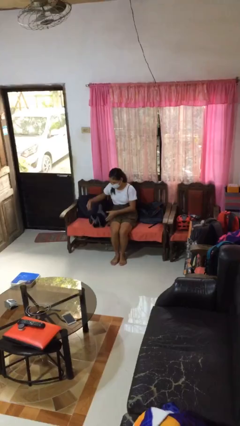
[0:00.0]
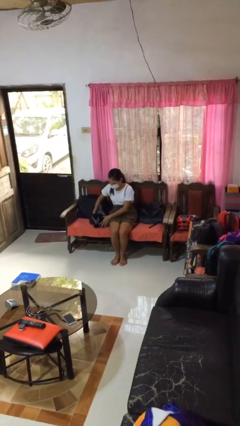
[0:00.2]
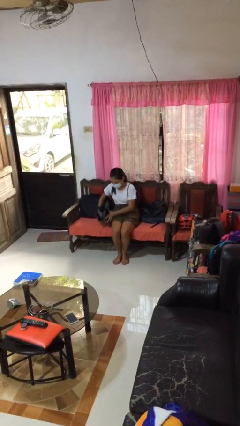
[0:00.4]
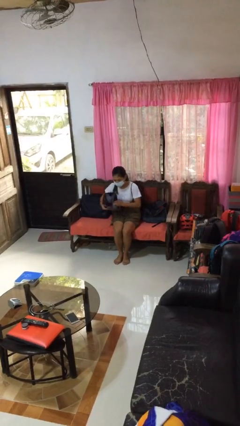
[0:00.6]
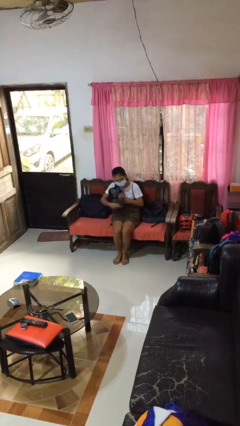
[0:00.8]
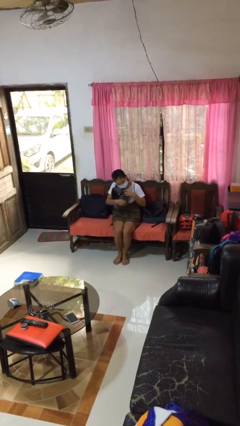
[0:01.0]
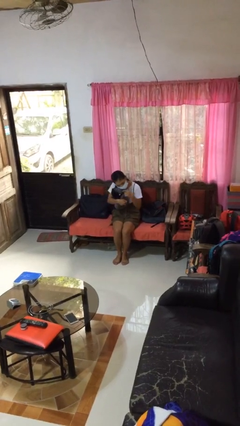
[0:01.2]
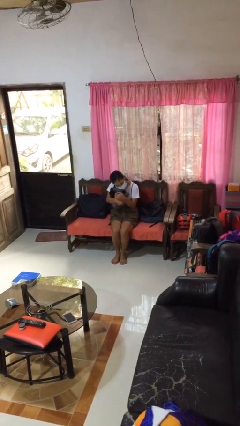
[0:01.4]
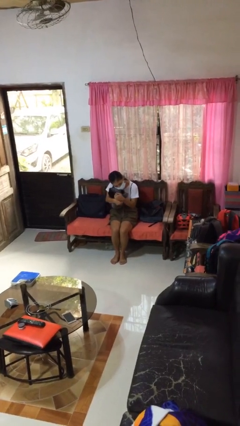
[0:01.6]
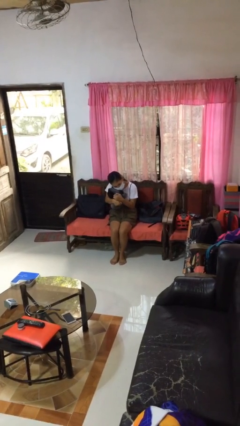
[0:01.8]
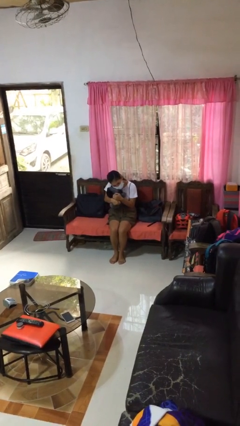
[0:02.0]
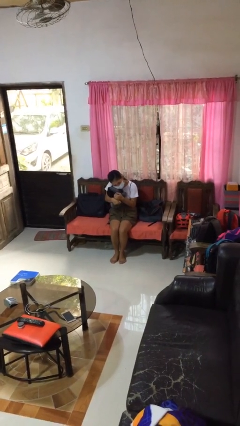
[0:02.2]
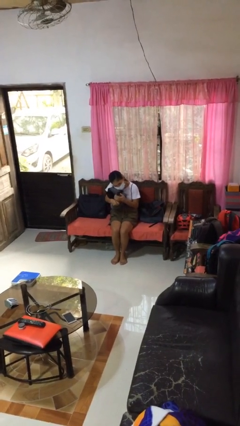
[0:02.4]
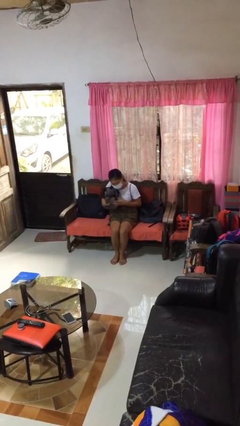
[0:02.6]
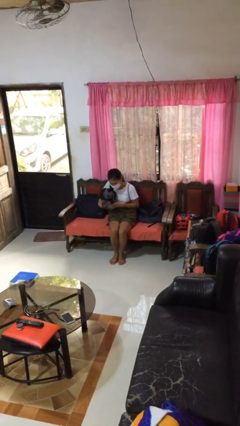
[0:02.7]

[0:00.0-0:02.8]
person hugs stuffed animal

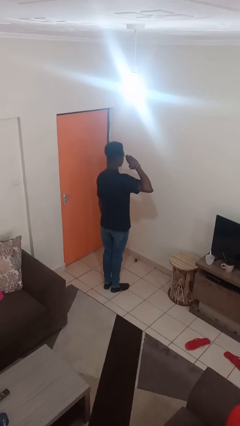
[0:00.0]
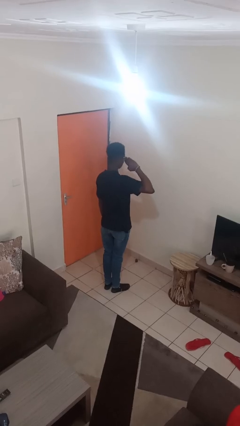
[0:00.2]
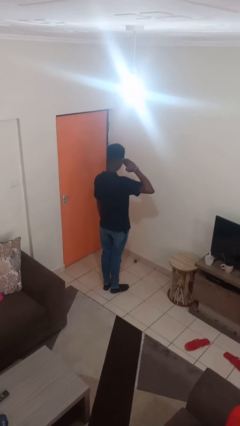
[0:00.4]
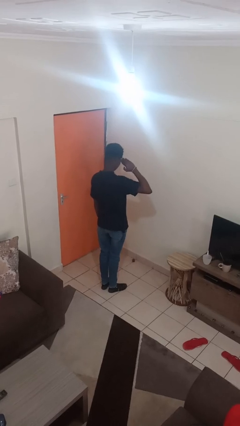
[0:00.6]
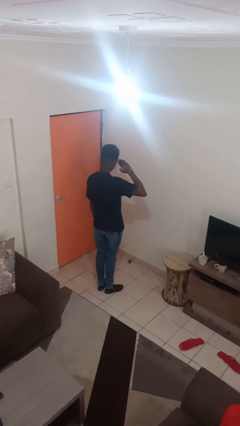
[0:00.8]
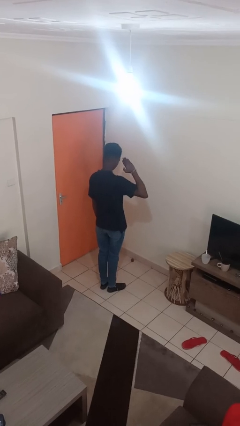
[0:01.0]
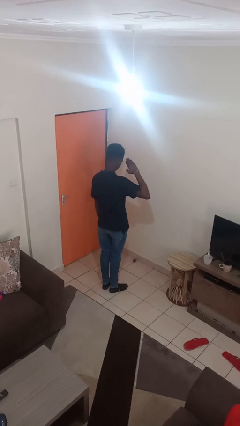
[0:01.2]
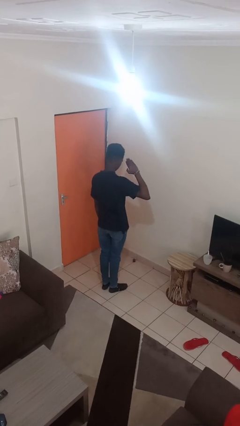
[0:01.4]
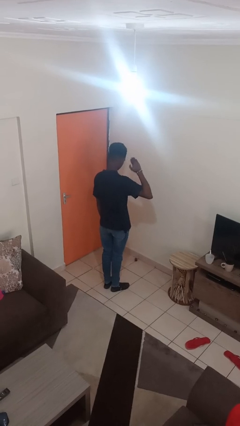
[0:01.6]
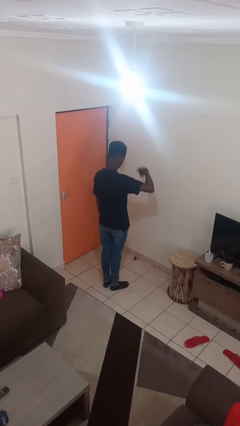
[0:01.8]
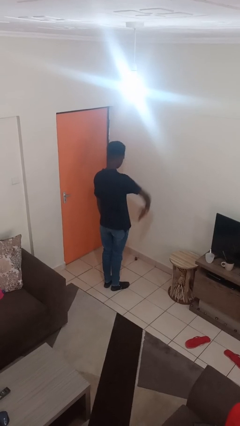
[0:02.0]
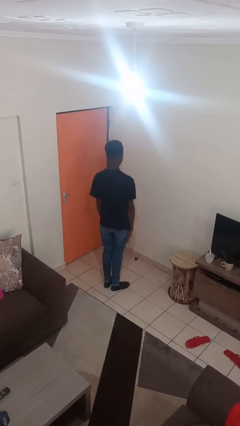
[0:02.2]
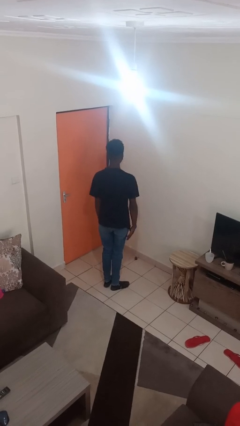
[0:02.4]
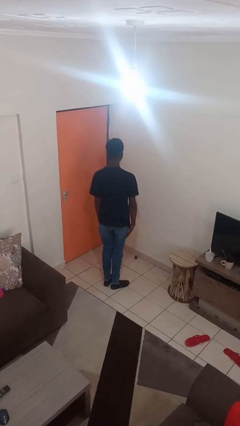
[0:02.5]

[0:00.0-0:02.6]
person salutes

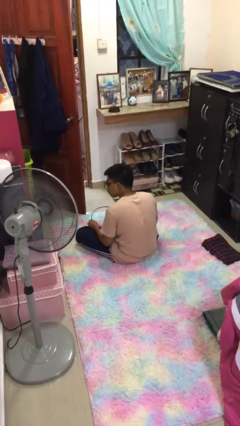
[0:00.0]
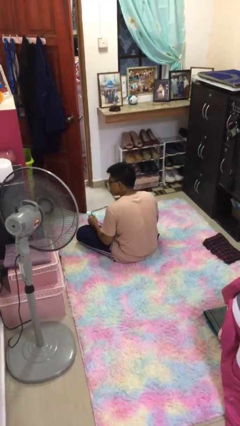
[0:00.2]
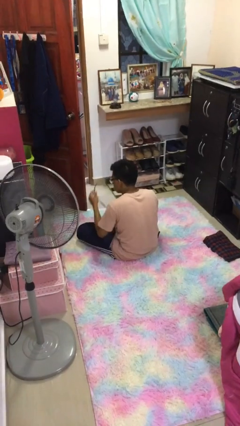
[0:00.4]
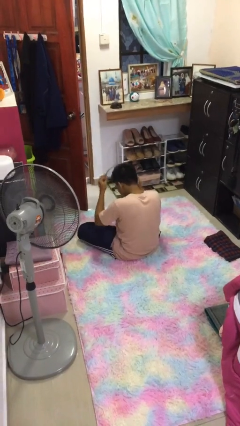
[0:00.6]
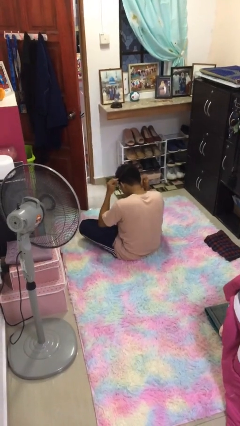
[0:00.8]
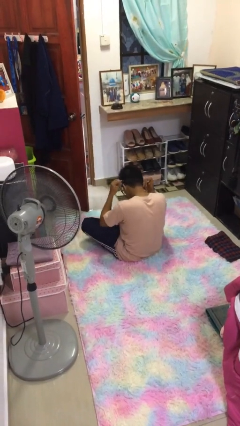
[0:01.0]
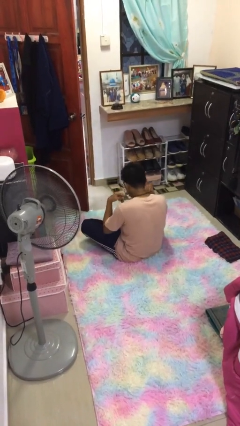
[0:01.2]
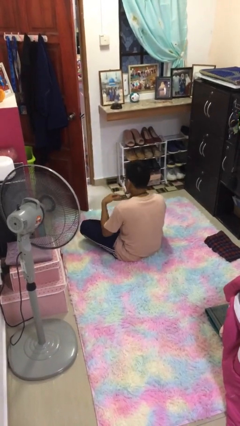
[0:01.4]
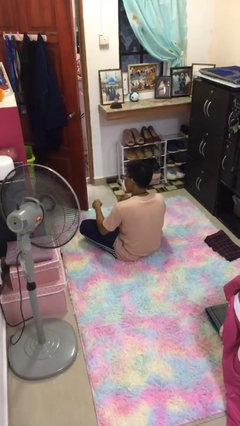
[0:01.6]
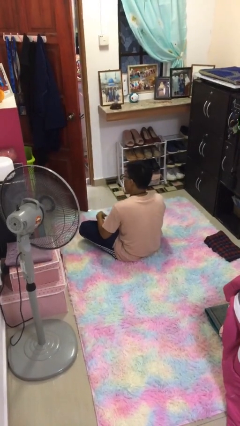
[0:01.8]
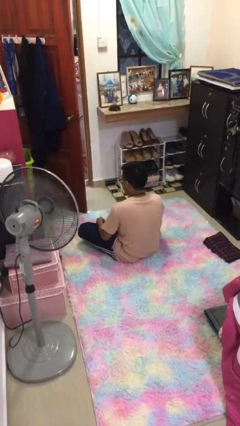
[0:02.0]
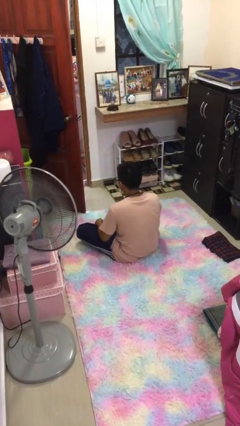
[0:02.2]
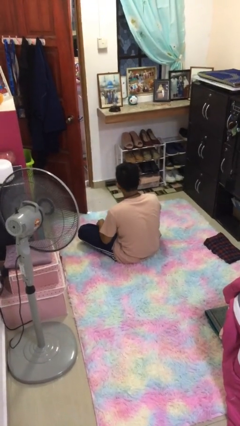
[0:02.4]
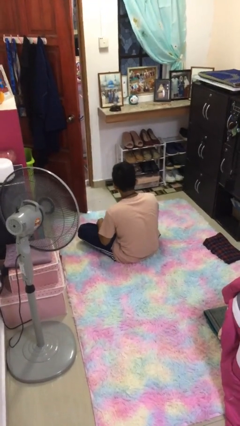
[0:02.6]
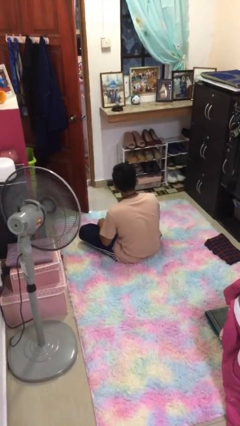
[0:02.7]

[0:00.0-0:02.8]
person puts on necklace

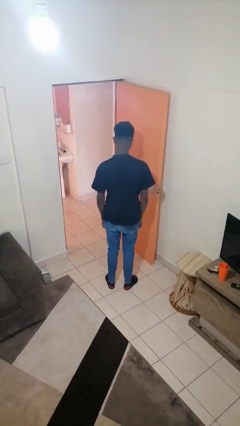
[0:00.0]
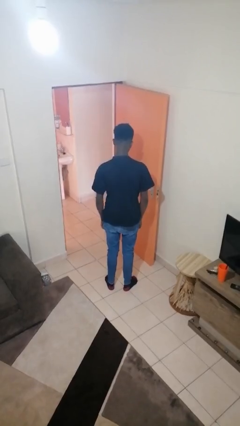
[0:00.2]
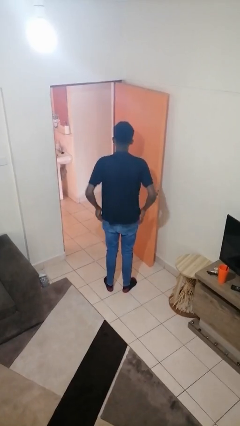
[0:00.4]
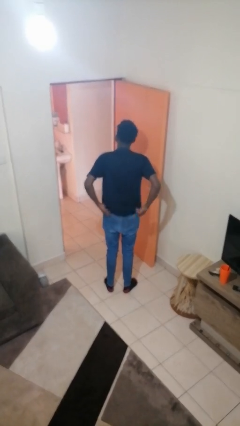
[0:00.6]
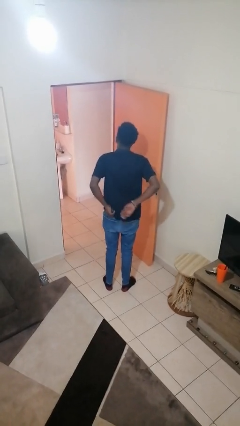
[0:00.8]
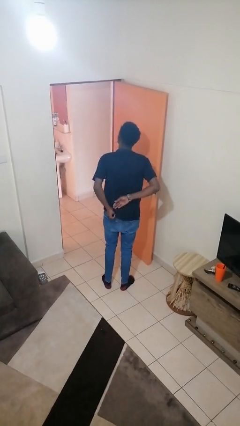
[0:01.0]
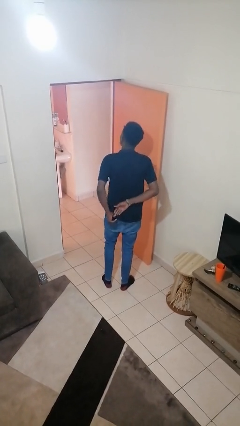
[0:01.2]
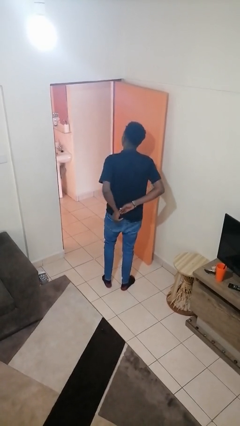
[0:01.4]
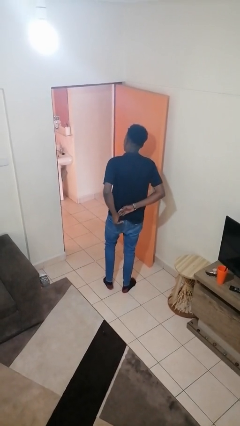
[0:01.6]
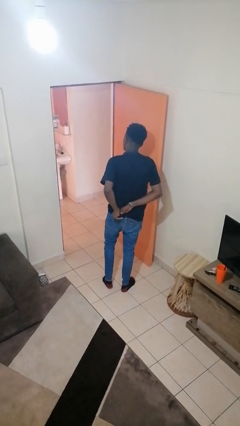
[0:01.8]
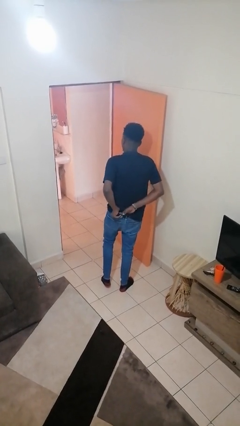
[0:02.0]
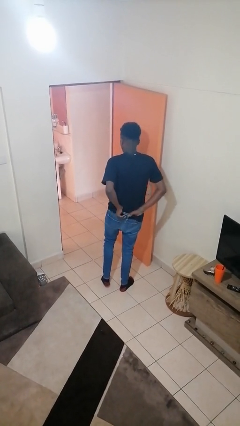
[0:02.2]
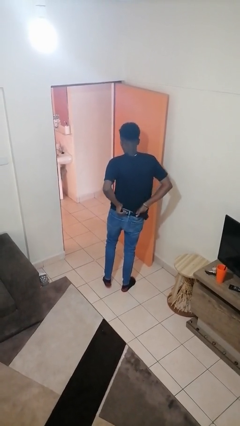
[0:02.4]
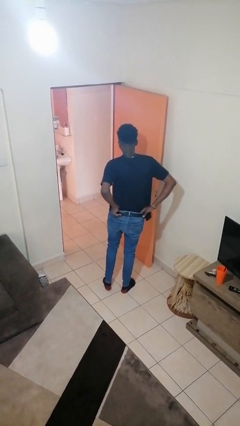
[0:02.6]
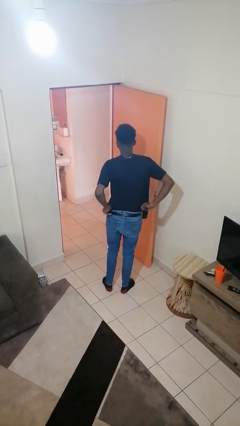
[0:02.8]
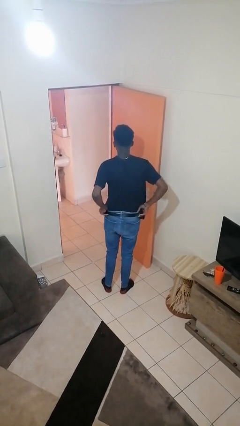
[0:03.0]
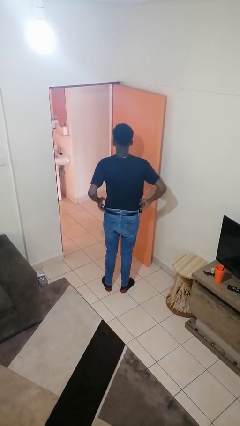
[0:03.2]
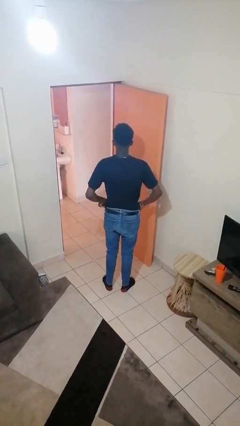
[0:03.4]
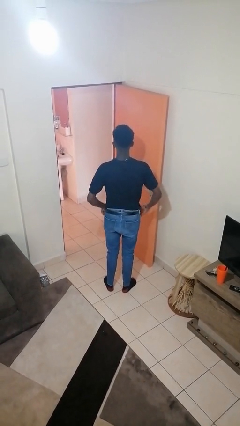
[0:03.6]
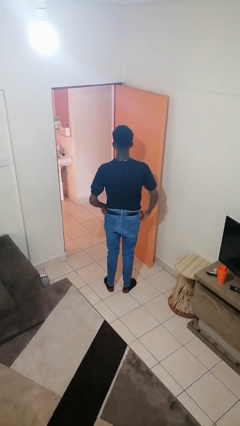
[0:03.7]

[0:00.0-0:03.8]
person tucks in shirt

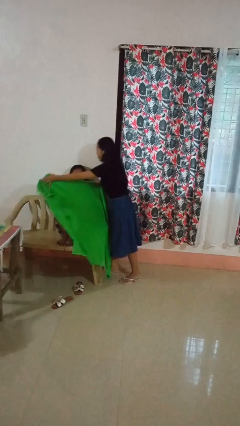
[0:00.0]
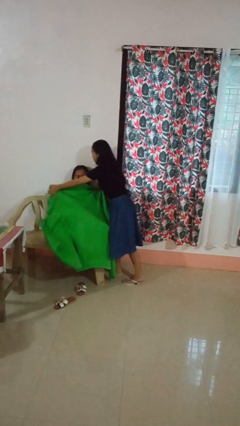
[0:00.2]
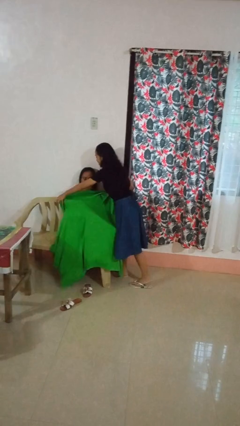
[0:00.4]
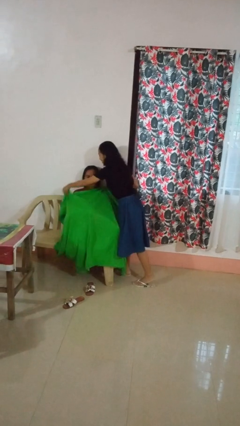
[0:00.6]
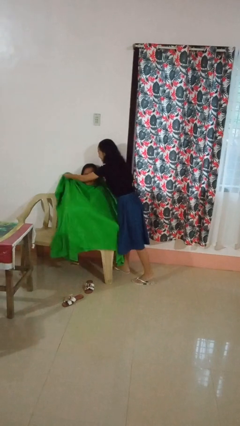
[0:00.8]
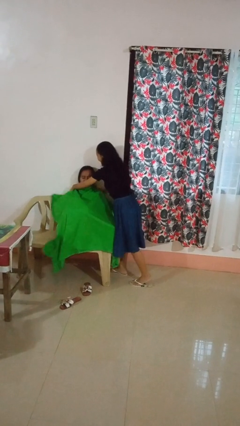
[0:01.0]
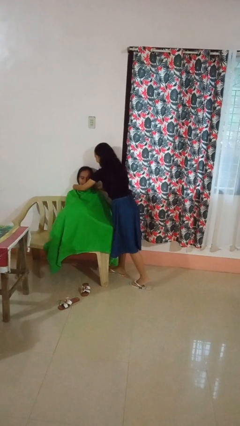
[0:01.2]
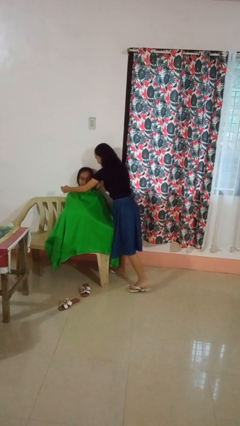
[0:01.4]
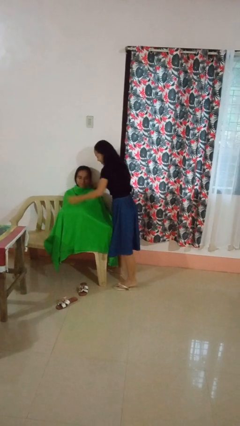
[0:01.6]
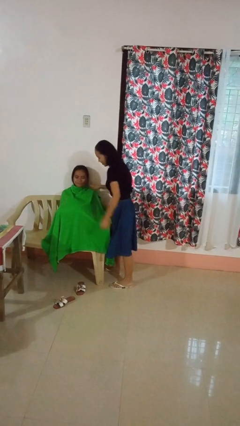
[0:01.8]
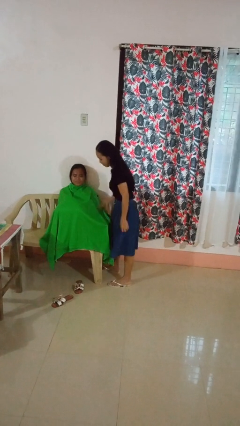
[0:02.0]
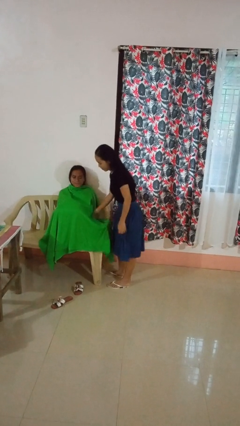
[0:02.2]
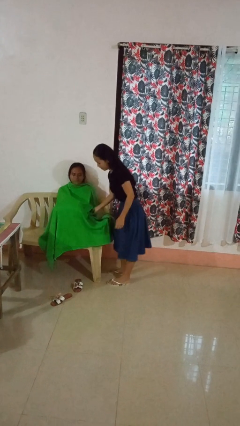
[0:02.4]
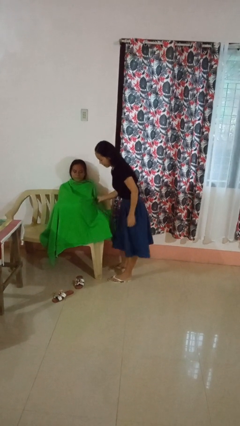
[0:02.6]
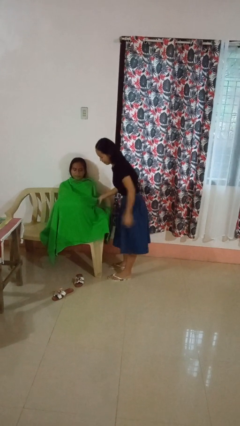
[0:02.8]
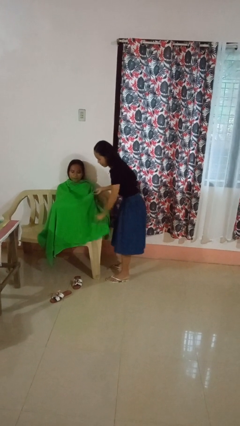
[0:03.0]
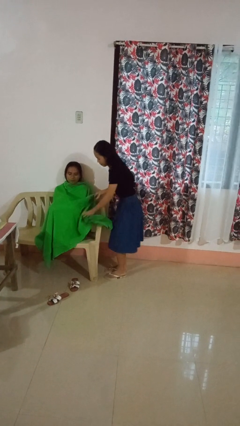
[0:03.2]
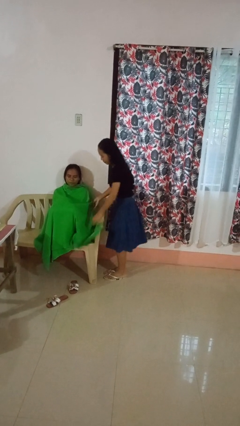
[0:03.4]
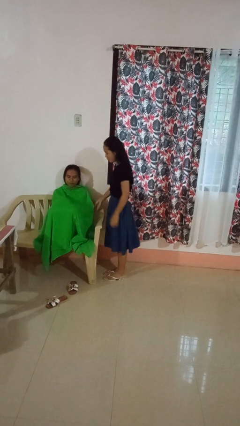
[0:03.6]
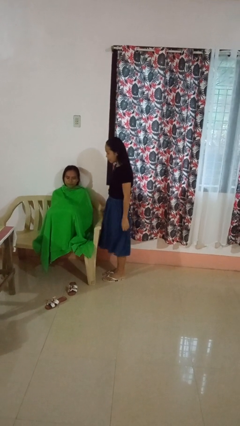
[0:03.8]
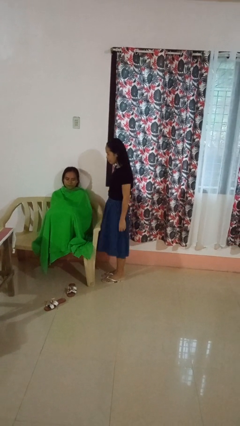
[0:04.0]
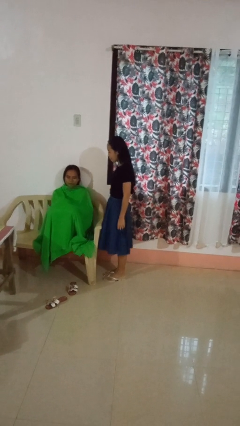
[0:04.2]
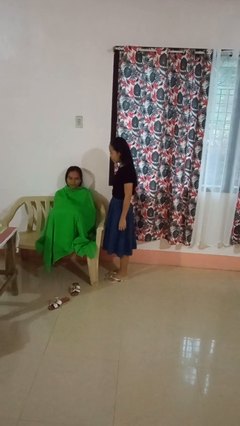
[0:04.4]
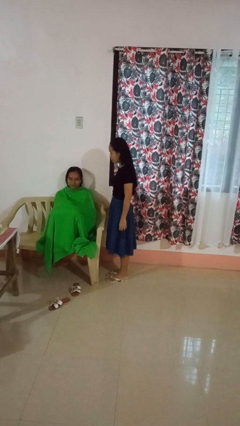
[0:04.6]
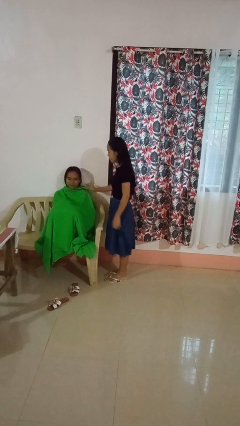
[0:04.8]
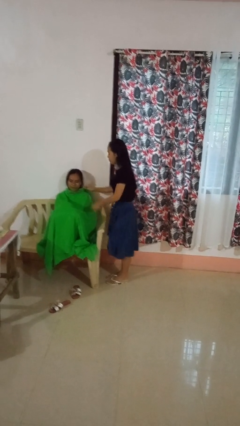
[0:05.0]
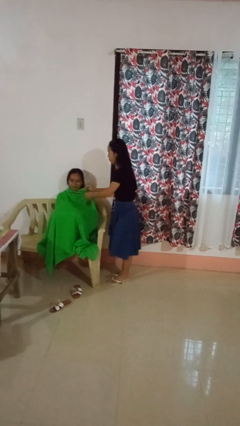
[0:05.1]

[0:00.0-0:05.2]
person covers friend with blanket

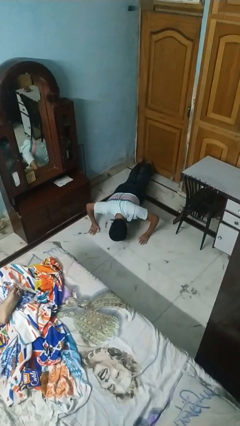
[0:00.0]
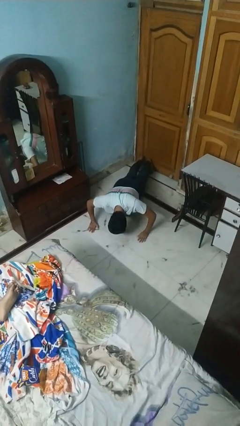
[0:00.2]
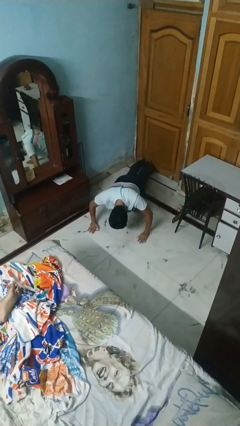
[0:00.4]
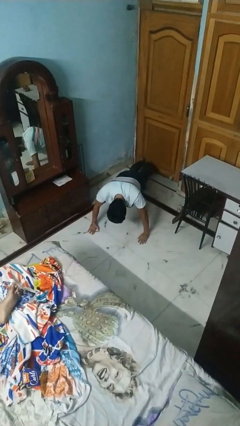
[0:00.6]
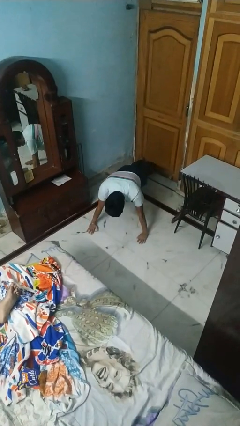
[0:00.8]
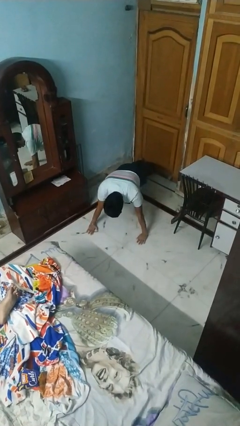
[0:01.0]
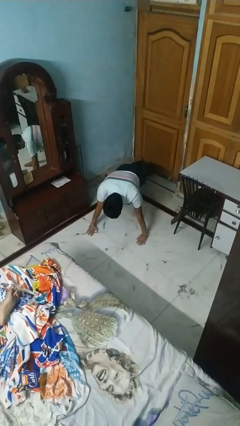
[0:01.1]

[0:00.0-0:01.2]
person exercises with pushup
